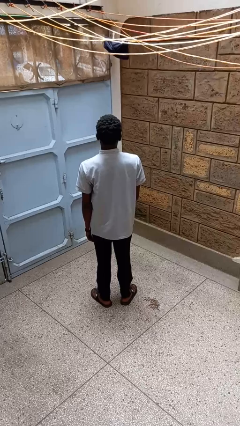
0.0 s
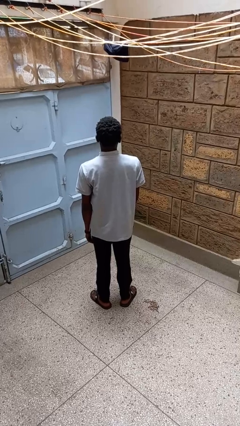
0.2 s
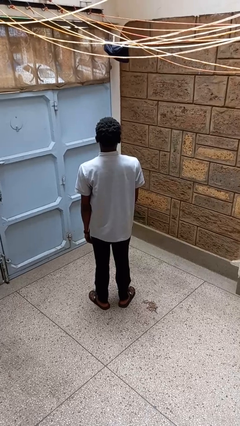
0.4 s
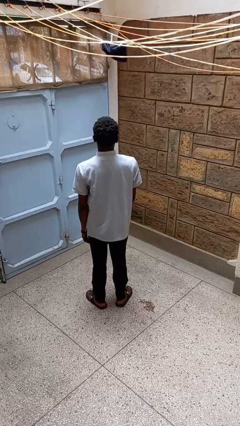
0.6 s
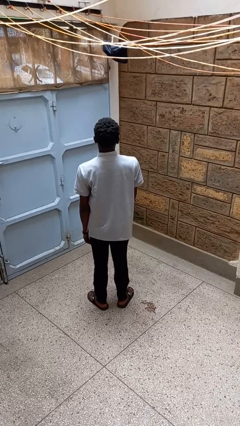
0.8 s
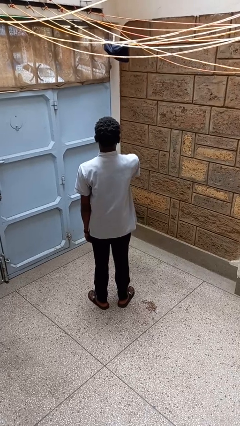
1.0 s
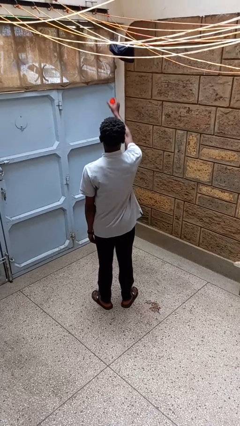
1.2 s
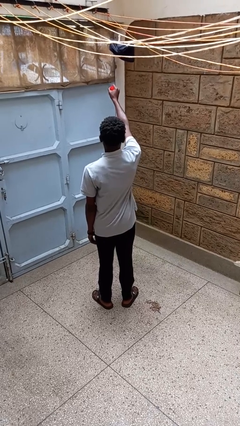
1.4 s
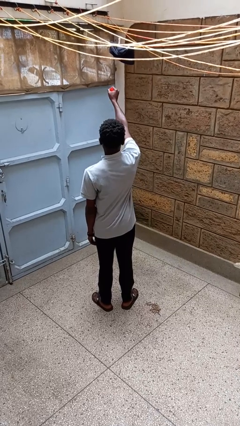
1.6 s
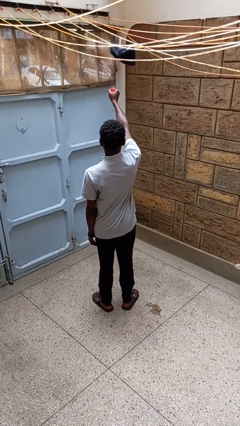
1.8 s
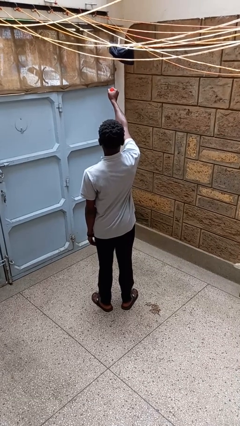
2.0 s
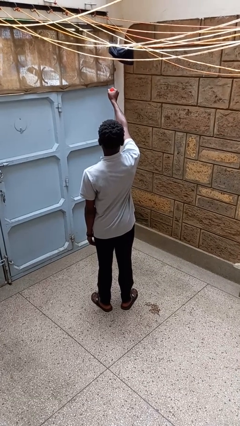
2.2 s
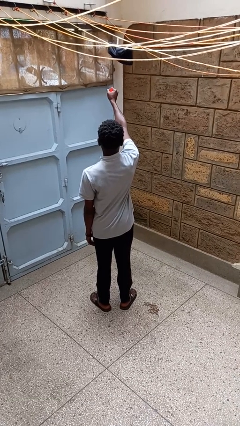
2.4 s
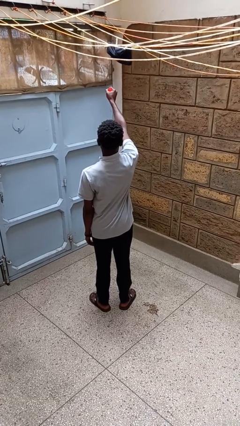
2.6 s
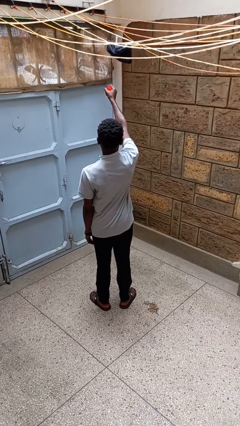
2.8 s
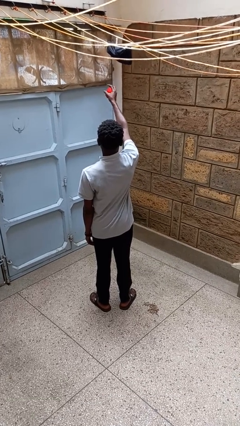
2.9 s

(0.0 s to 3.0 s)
person squeezes object

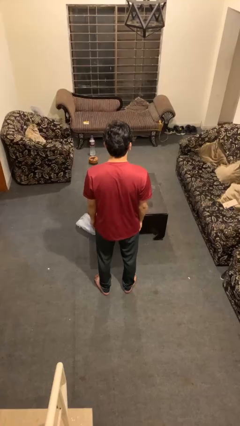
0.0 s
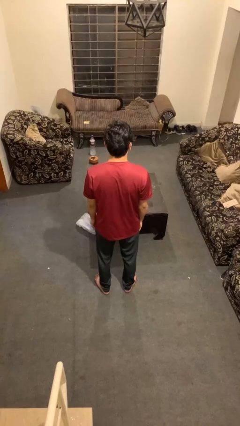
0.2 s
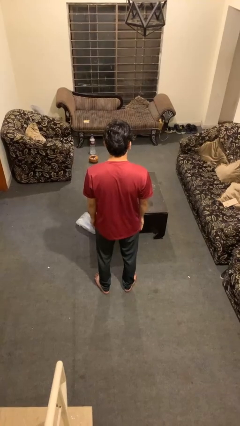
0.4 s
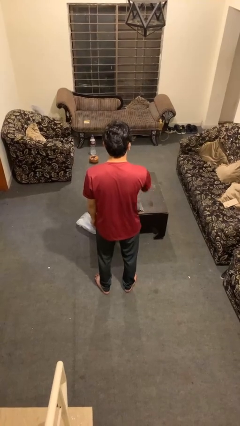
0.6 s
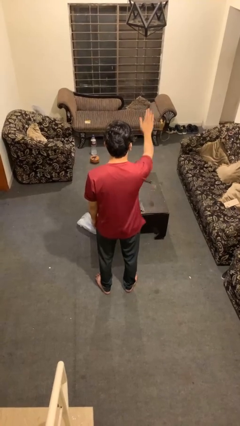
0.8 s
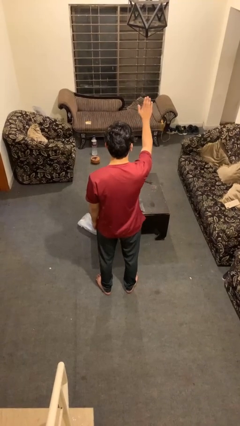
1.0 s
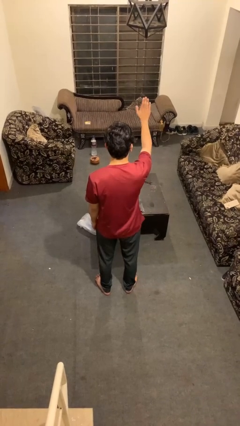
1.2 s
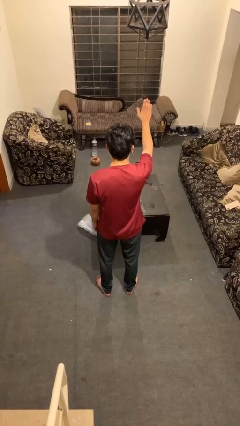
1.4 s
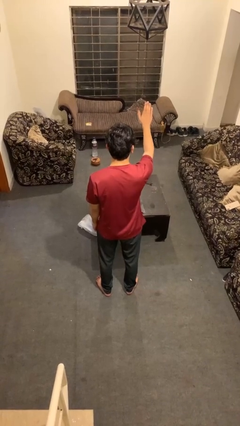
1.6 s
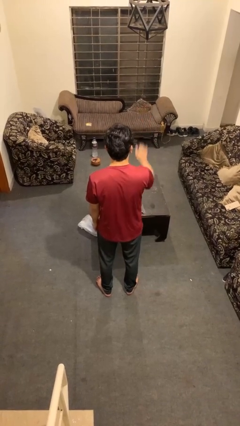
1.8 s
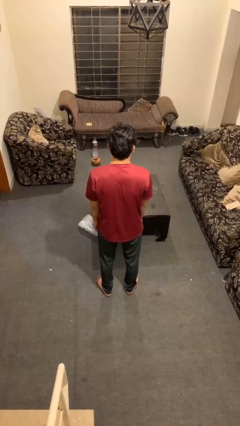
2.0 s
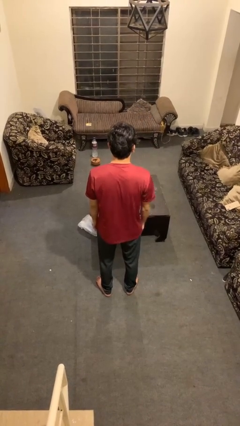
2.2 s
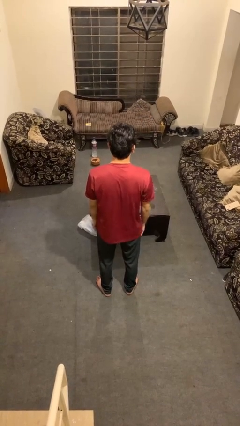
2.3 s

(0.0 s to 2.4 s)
person gestures stop

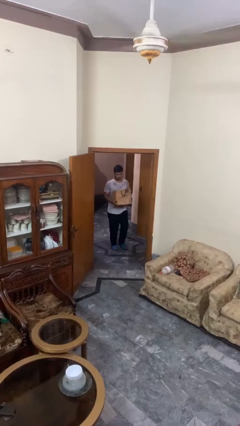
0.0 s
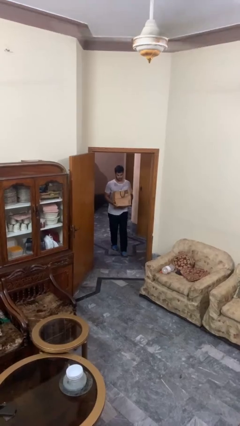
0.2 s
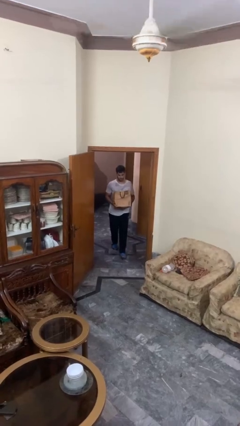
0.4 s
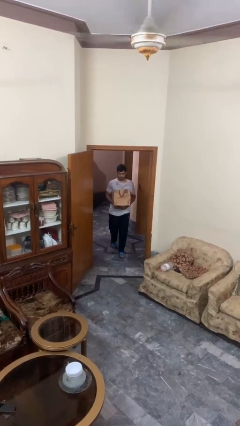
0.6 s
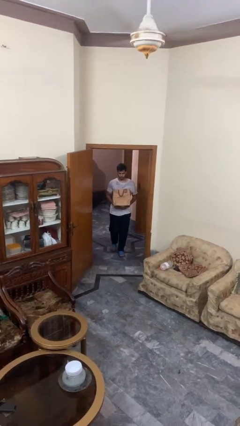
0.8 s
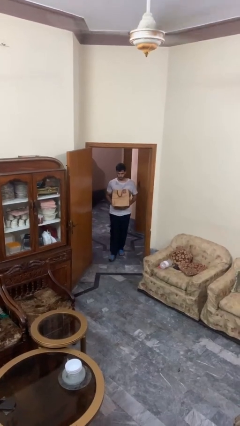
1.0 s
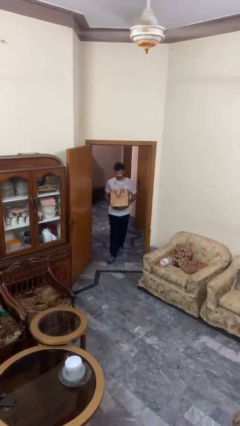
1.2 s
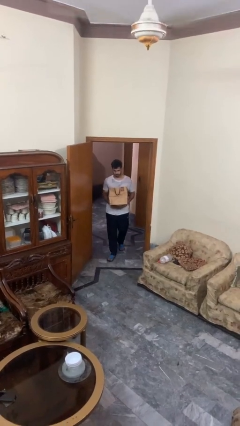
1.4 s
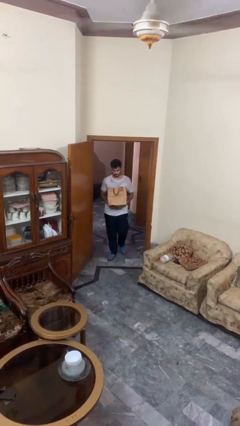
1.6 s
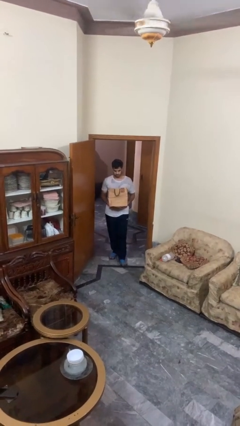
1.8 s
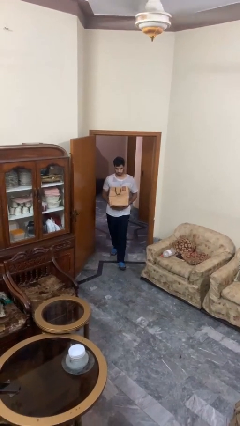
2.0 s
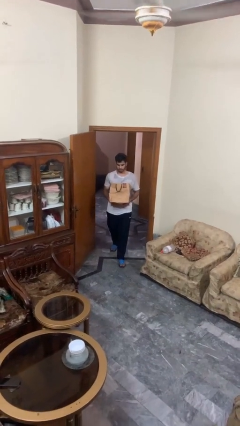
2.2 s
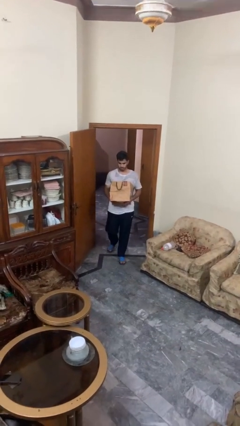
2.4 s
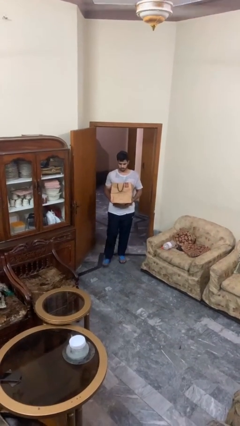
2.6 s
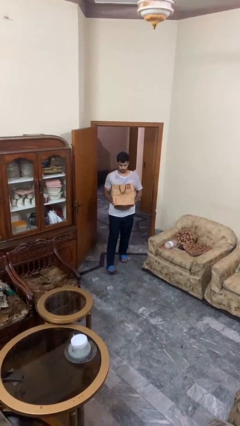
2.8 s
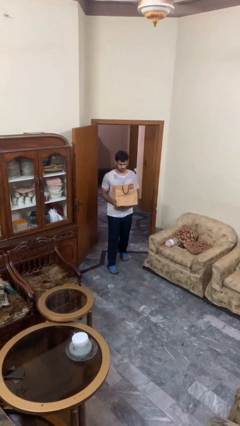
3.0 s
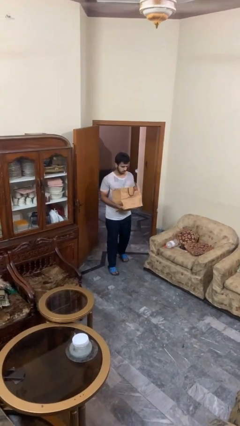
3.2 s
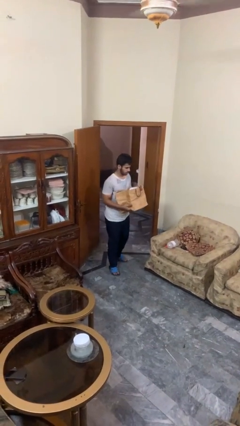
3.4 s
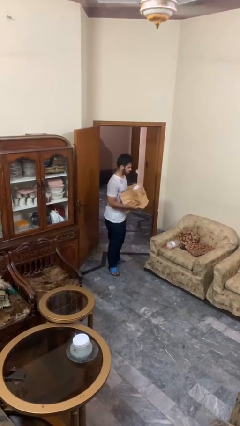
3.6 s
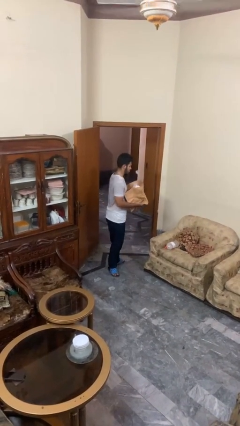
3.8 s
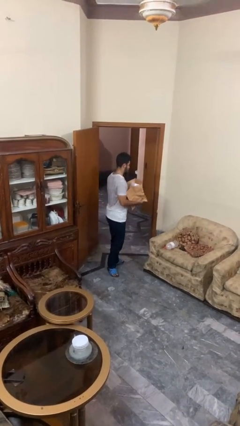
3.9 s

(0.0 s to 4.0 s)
person carries groceries

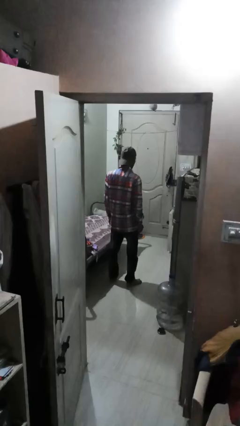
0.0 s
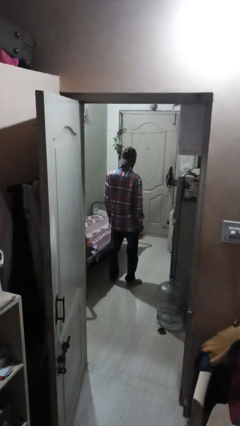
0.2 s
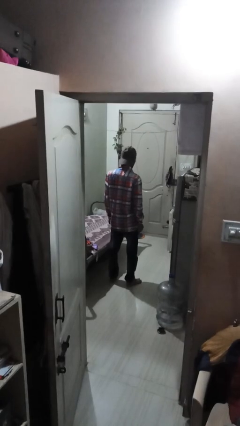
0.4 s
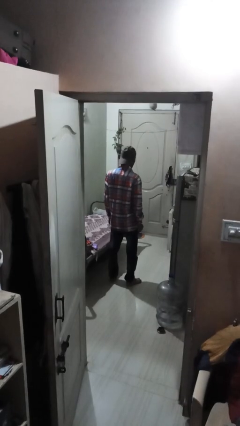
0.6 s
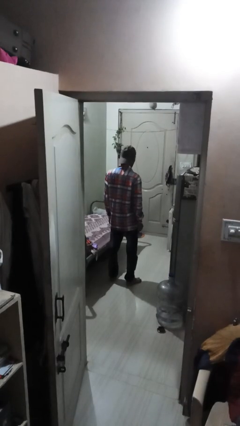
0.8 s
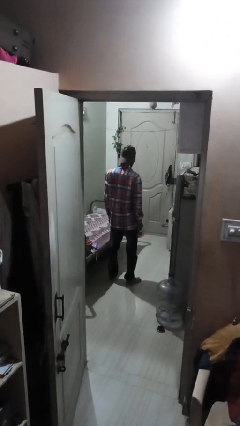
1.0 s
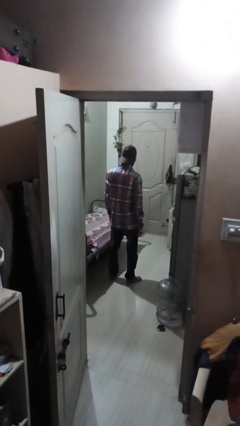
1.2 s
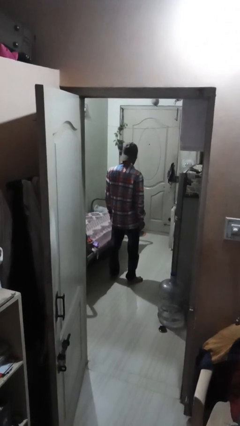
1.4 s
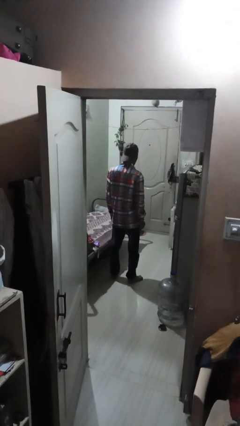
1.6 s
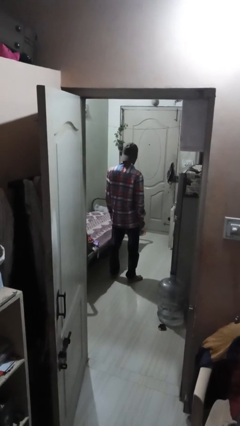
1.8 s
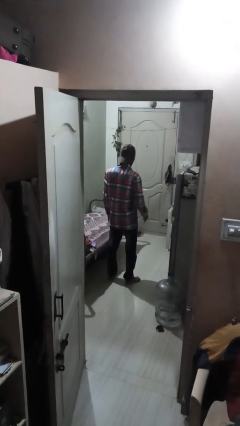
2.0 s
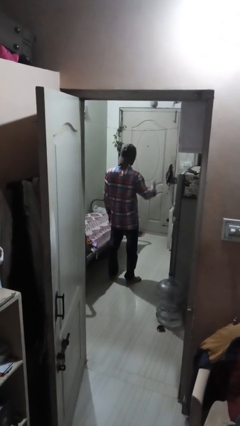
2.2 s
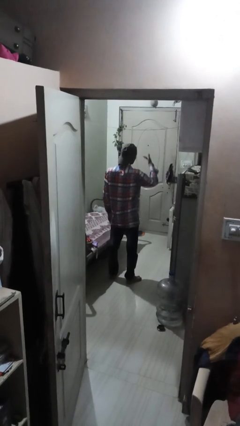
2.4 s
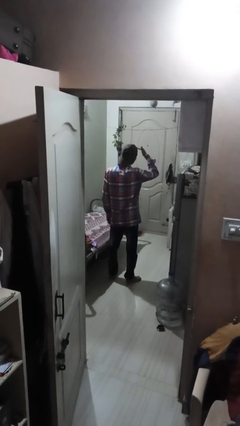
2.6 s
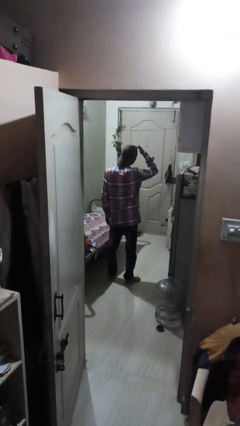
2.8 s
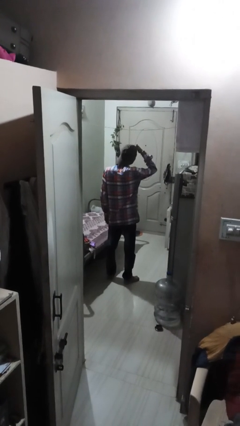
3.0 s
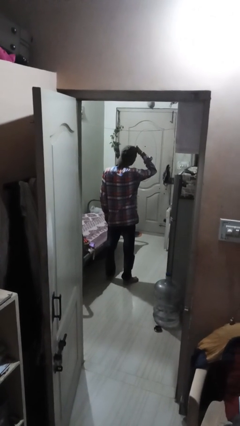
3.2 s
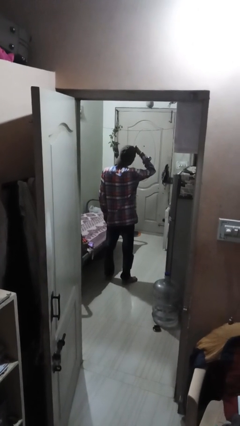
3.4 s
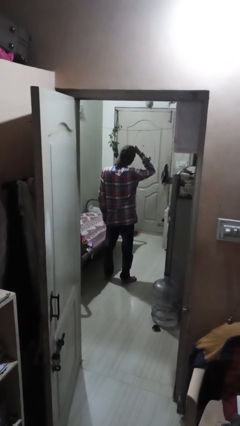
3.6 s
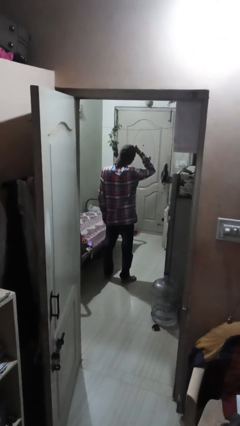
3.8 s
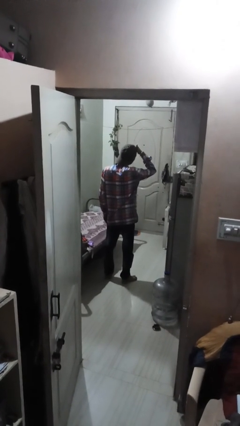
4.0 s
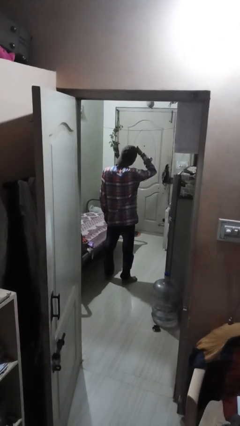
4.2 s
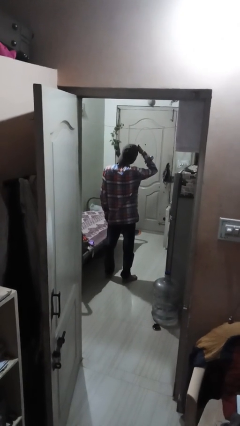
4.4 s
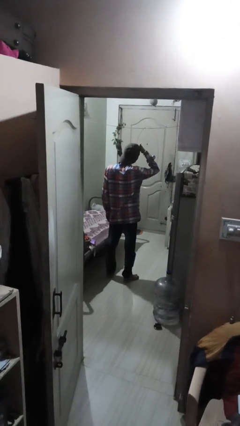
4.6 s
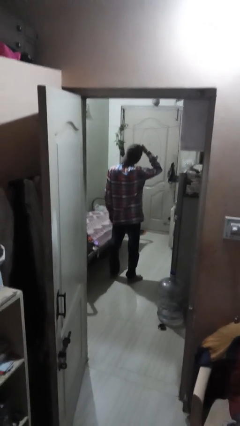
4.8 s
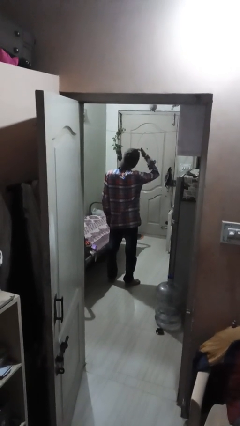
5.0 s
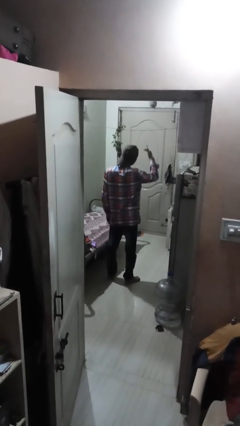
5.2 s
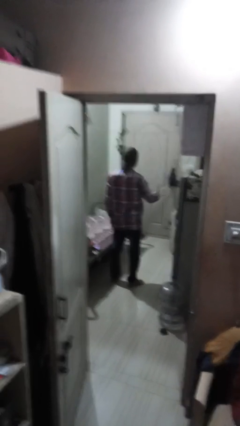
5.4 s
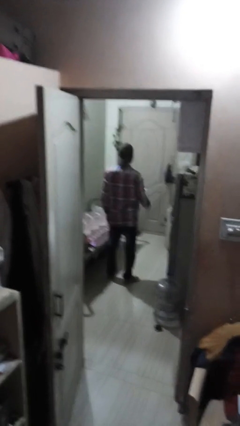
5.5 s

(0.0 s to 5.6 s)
person shades eyes

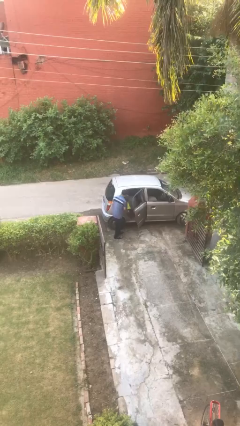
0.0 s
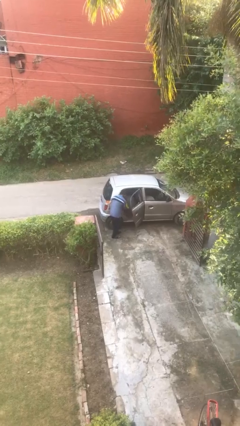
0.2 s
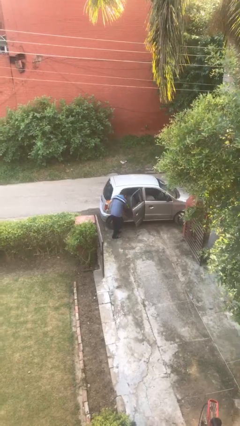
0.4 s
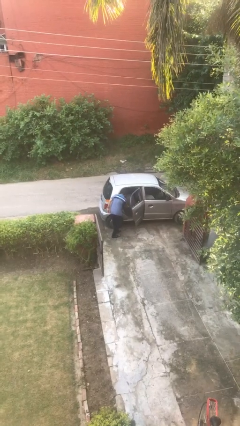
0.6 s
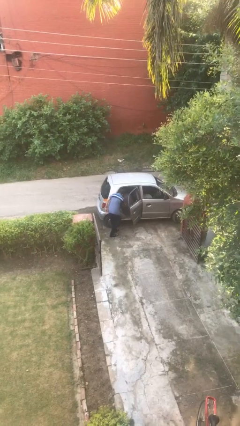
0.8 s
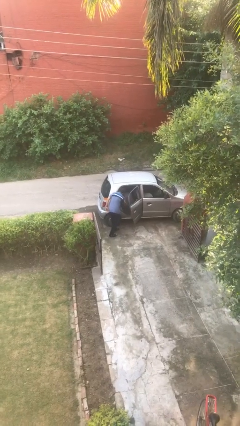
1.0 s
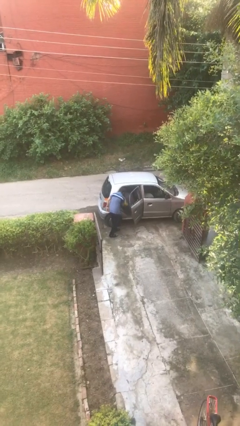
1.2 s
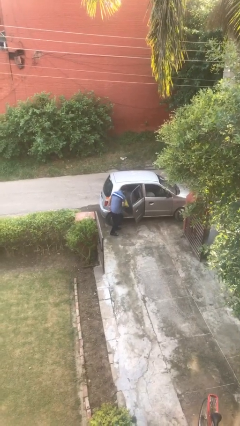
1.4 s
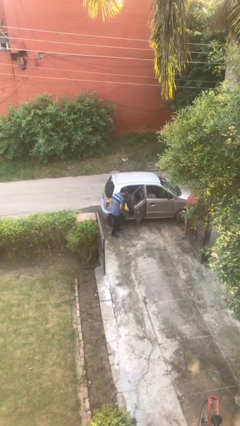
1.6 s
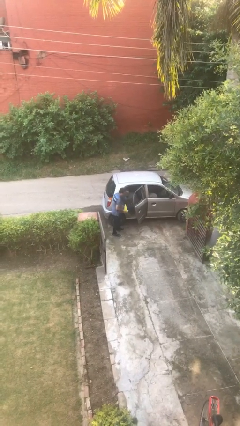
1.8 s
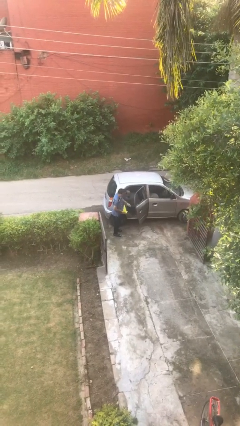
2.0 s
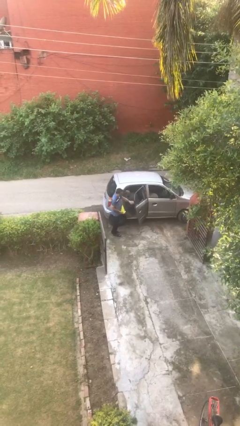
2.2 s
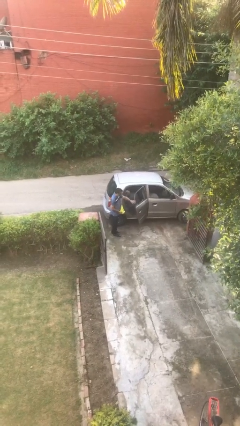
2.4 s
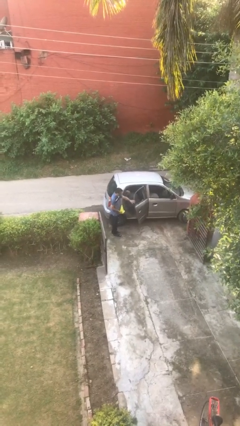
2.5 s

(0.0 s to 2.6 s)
person unloads car
